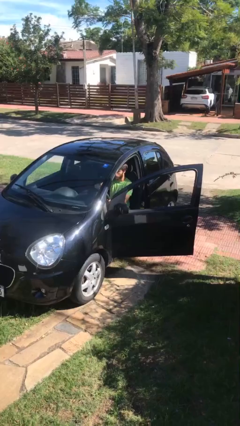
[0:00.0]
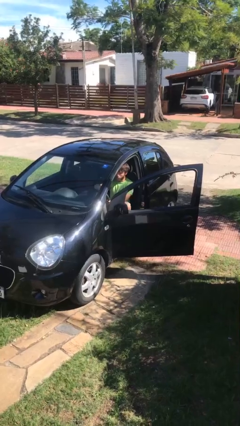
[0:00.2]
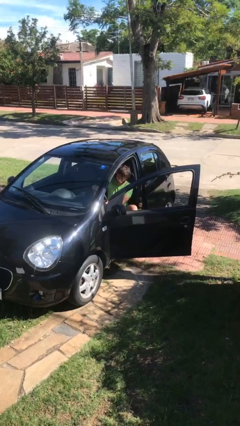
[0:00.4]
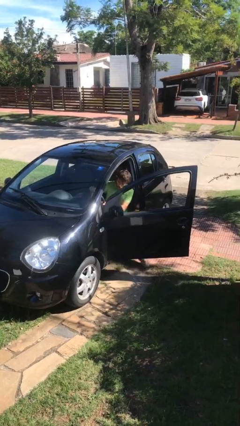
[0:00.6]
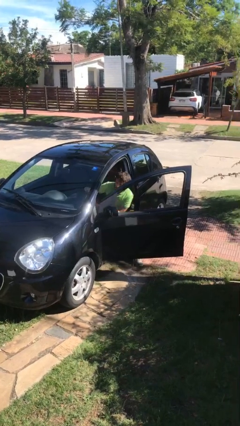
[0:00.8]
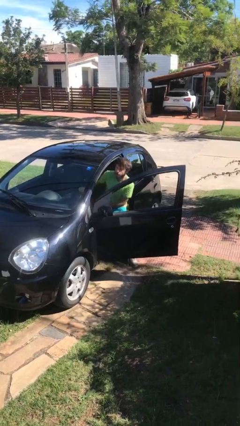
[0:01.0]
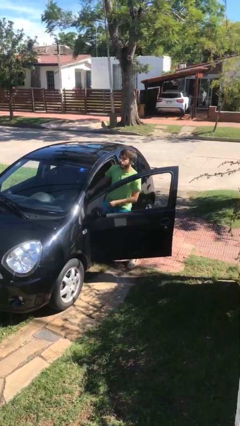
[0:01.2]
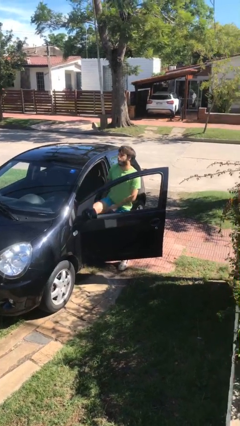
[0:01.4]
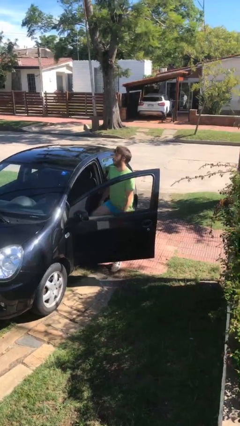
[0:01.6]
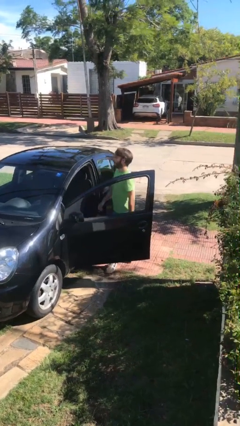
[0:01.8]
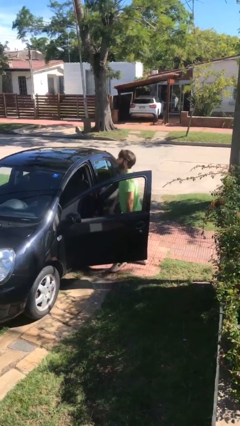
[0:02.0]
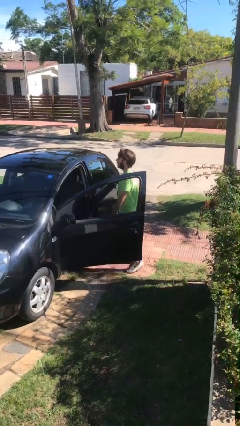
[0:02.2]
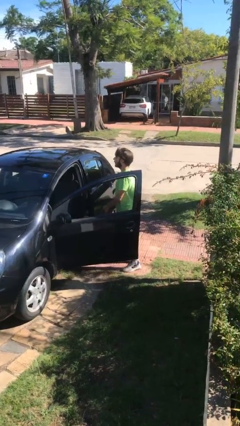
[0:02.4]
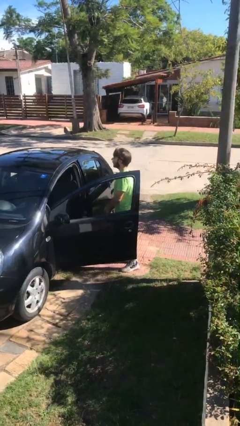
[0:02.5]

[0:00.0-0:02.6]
person exits car

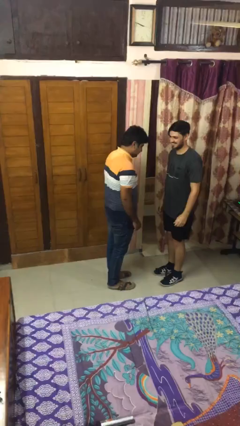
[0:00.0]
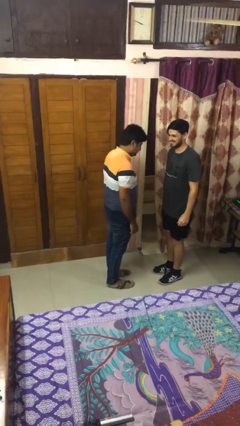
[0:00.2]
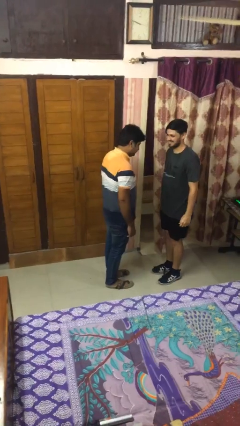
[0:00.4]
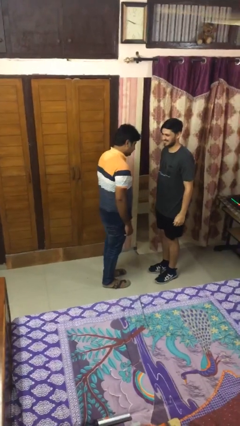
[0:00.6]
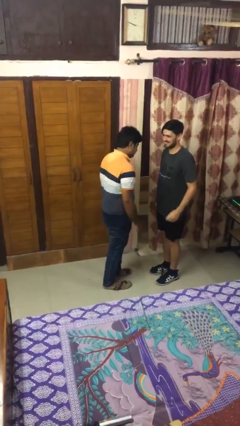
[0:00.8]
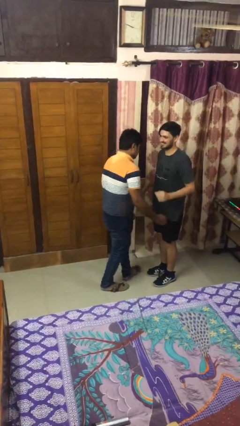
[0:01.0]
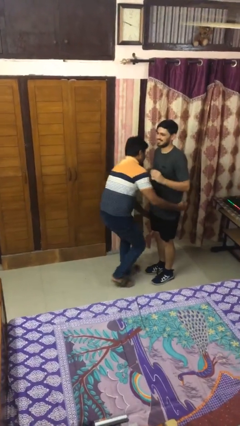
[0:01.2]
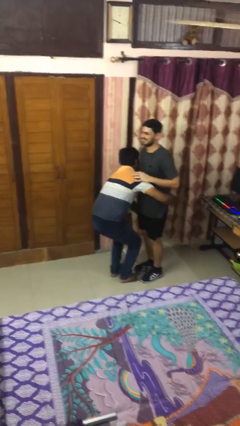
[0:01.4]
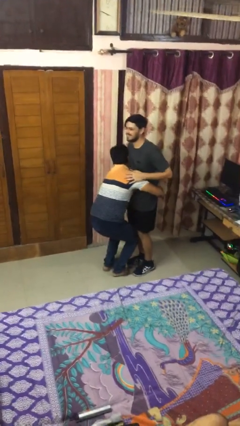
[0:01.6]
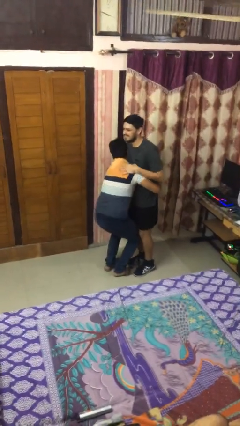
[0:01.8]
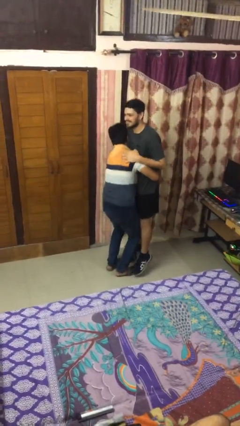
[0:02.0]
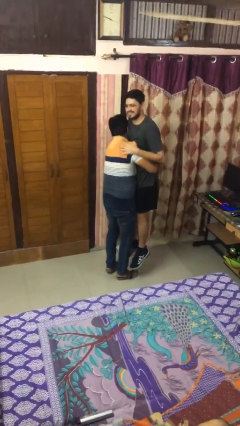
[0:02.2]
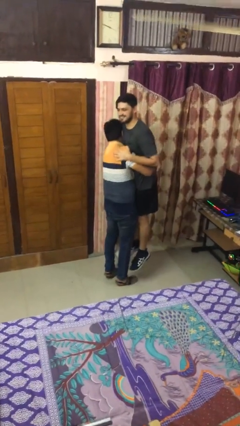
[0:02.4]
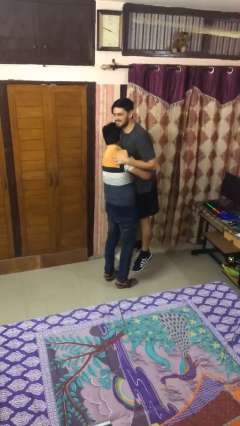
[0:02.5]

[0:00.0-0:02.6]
person picks up person

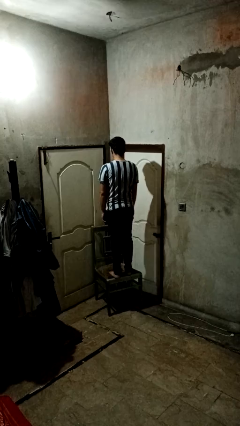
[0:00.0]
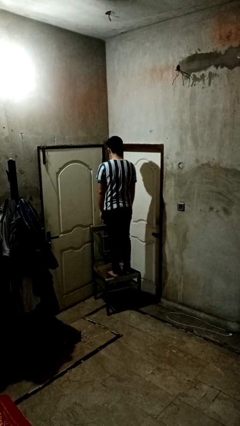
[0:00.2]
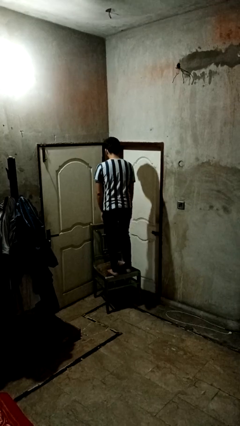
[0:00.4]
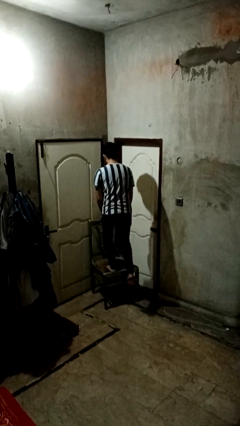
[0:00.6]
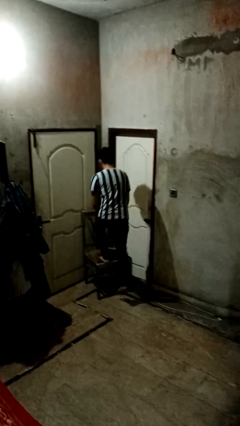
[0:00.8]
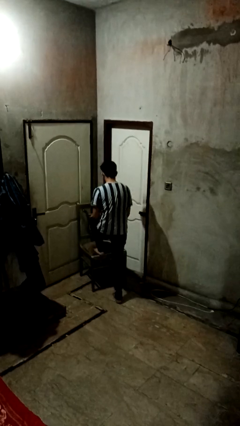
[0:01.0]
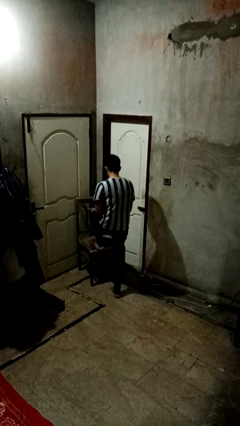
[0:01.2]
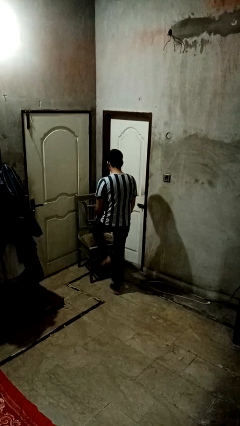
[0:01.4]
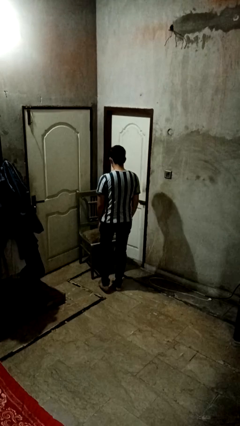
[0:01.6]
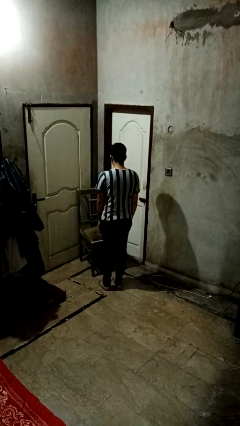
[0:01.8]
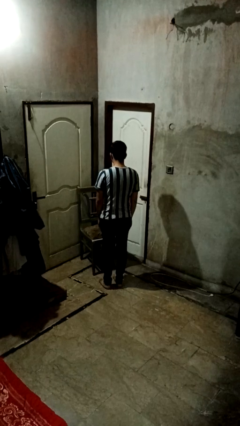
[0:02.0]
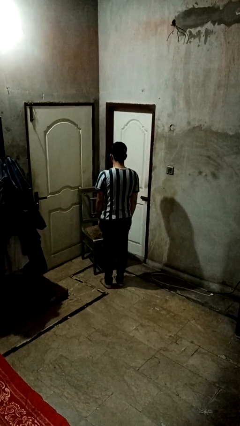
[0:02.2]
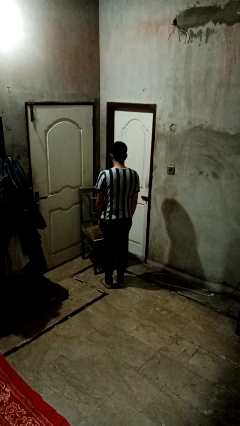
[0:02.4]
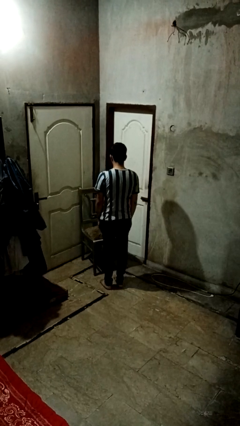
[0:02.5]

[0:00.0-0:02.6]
person climbs off chair

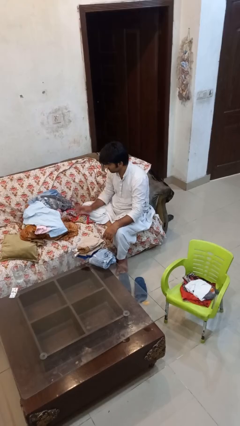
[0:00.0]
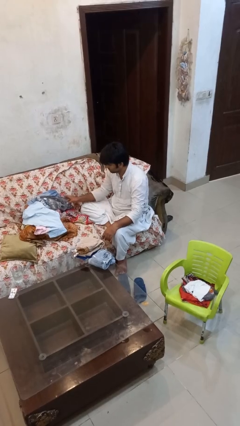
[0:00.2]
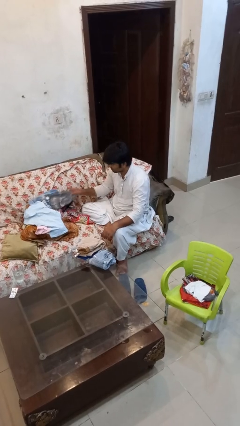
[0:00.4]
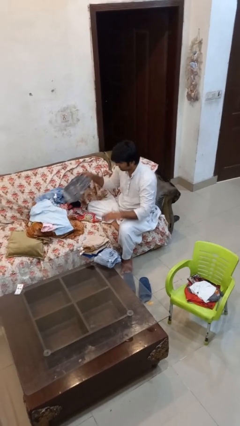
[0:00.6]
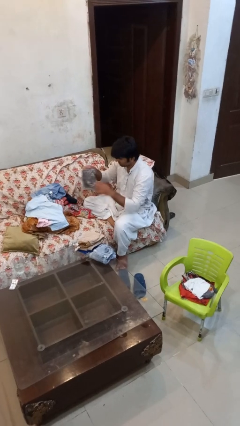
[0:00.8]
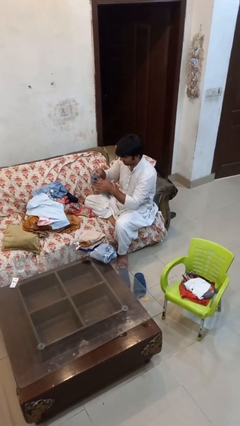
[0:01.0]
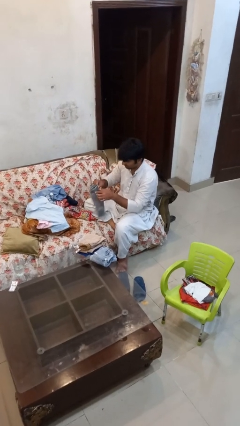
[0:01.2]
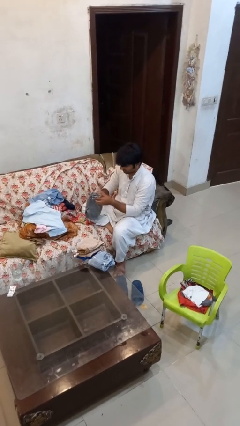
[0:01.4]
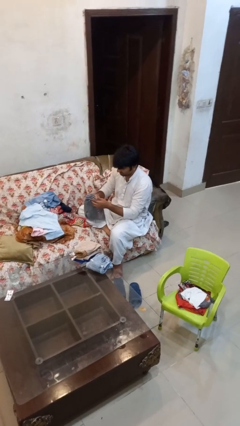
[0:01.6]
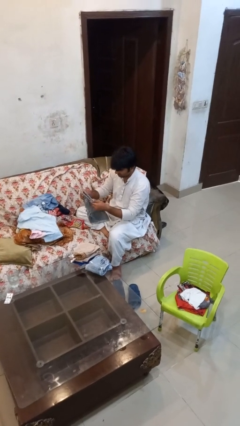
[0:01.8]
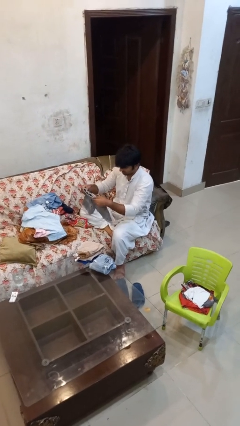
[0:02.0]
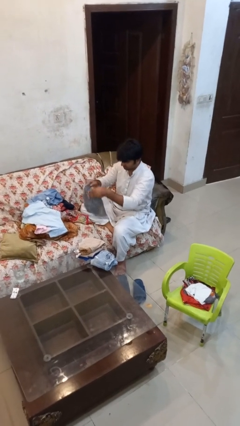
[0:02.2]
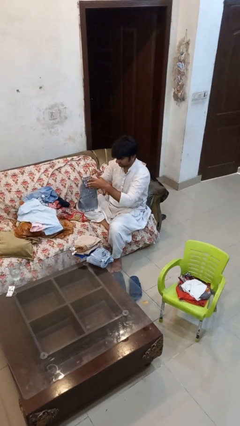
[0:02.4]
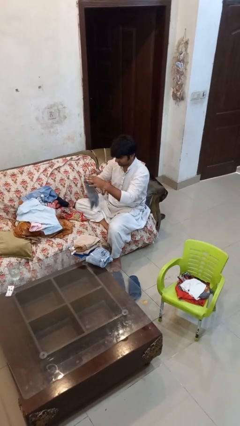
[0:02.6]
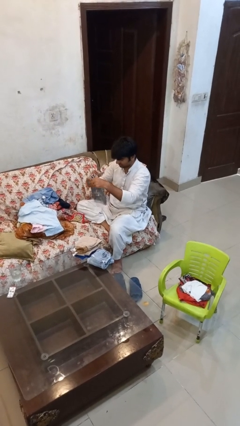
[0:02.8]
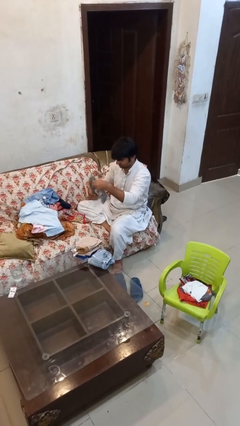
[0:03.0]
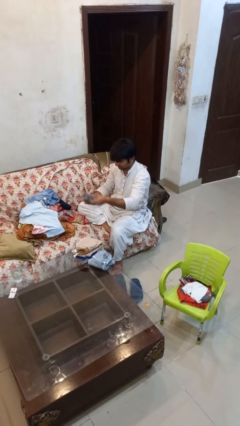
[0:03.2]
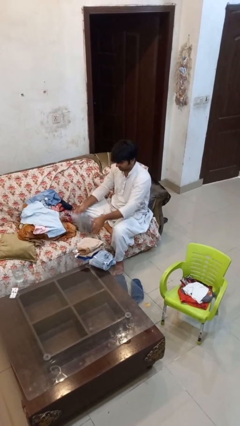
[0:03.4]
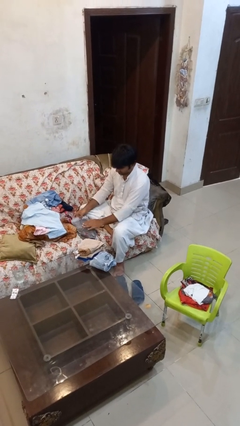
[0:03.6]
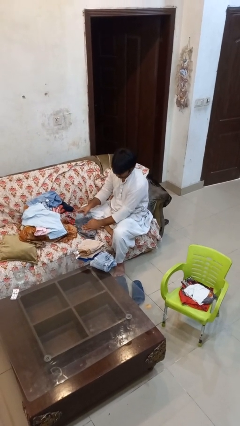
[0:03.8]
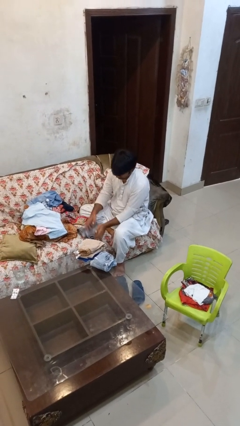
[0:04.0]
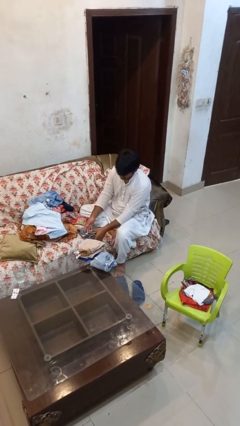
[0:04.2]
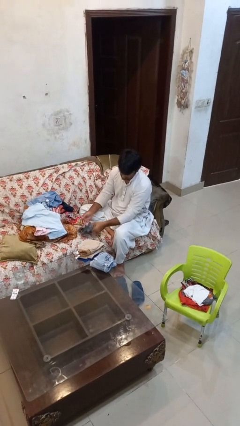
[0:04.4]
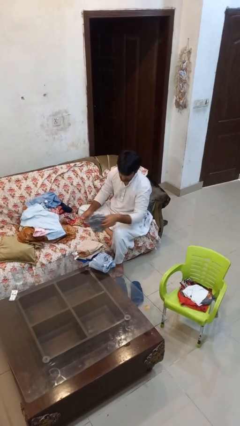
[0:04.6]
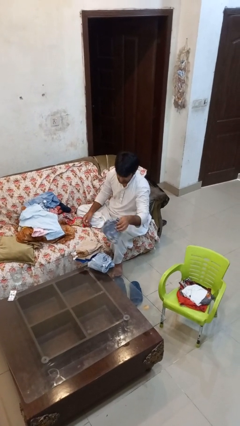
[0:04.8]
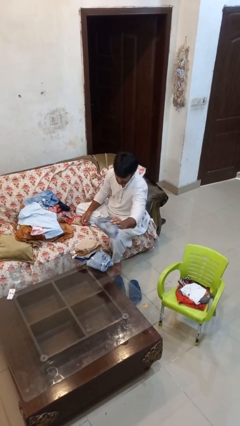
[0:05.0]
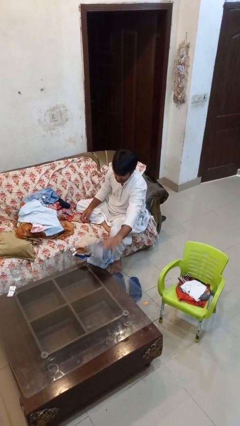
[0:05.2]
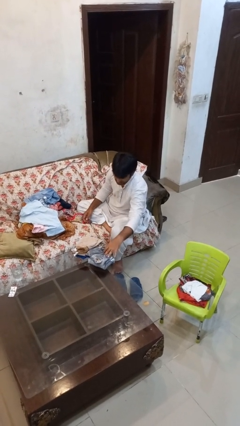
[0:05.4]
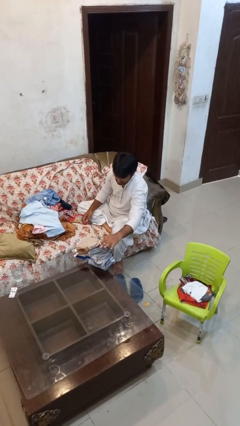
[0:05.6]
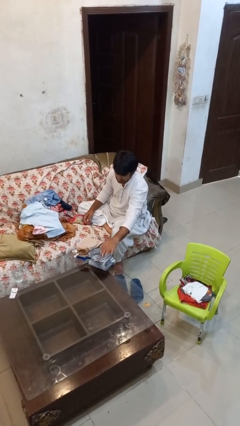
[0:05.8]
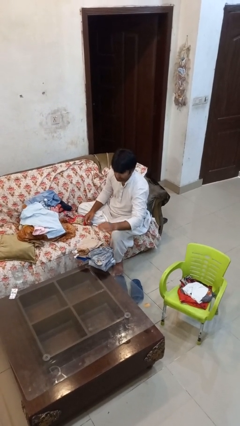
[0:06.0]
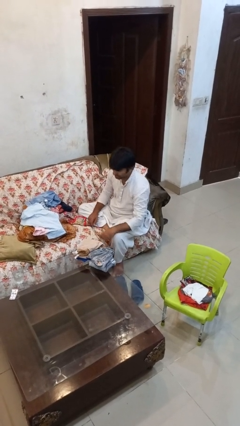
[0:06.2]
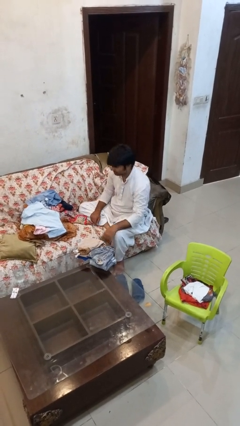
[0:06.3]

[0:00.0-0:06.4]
person folds pants

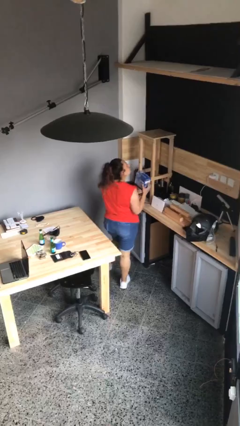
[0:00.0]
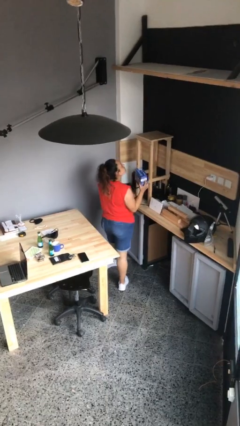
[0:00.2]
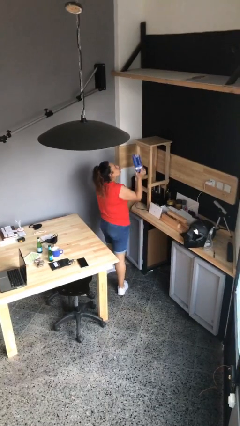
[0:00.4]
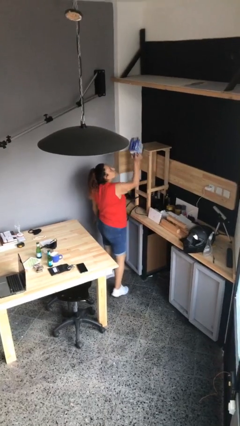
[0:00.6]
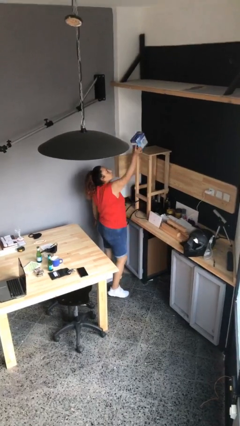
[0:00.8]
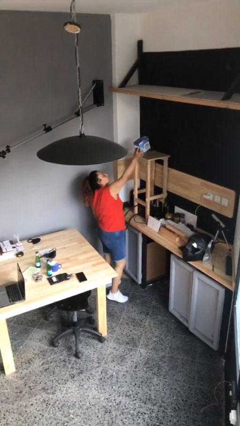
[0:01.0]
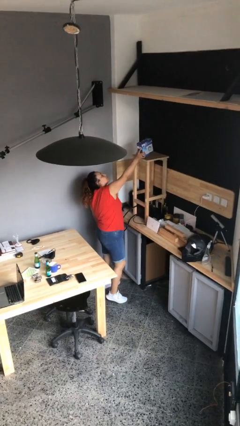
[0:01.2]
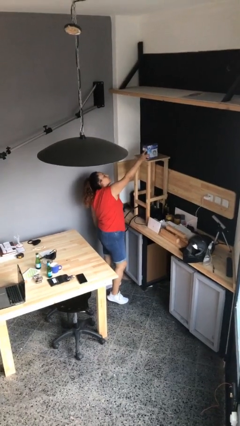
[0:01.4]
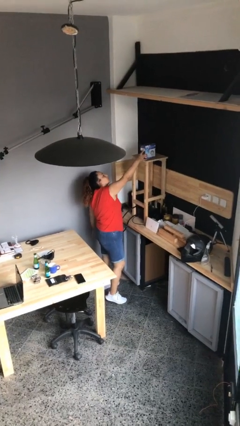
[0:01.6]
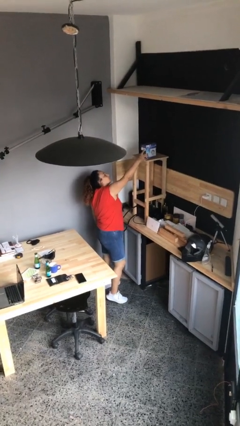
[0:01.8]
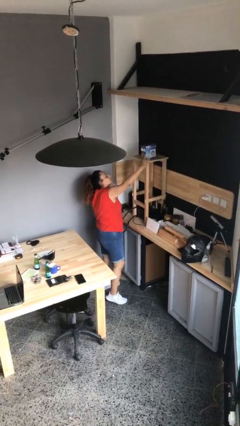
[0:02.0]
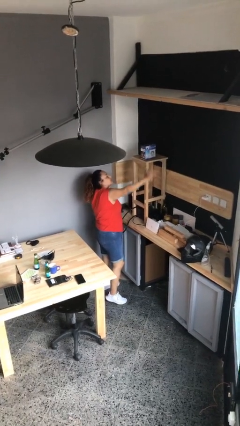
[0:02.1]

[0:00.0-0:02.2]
person puts down object on shelf

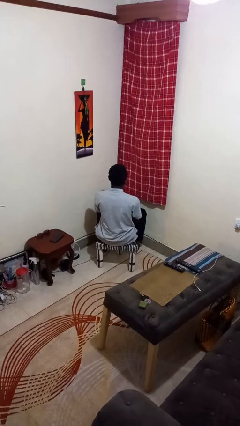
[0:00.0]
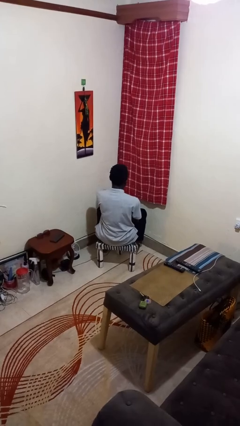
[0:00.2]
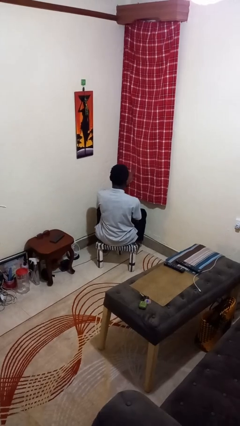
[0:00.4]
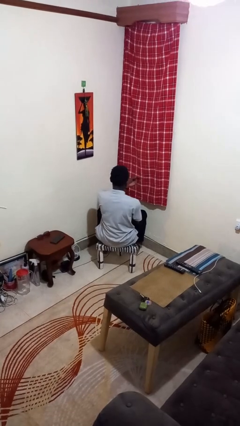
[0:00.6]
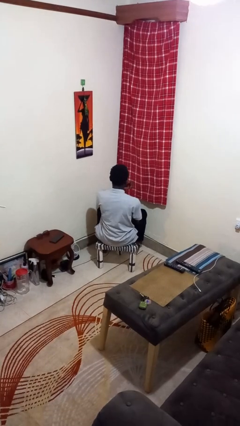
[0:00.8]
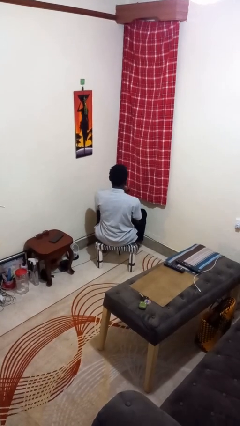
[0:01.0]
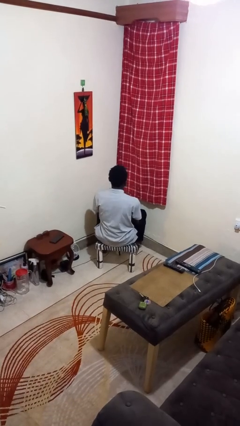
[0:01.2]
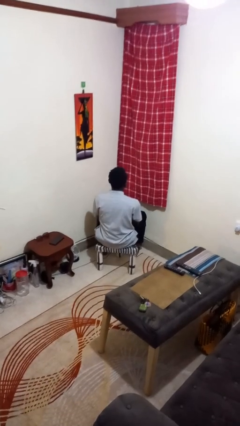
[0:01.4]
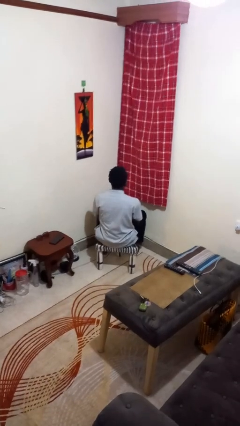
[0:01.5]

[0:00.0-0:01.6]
person gestures swipe right
